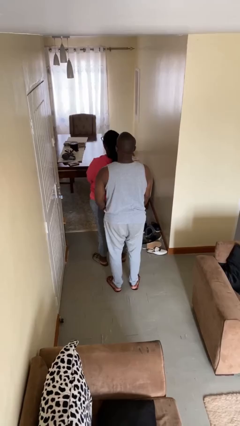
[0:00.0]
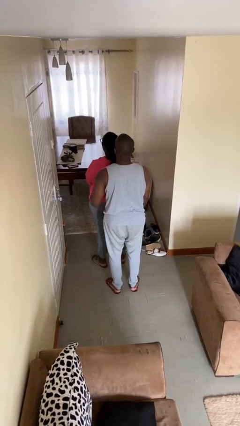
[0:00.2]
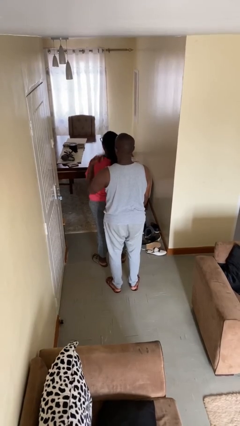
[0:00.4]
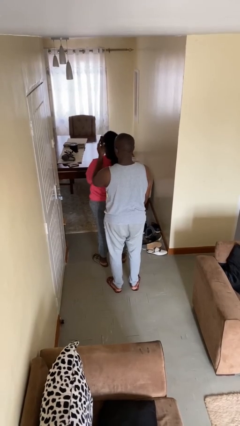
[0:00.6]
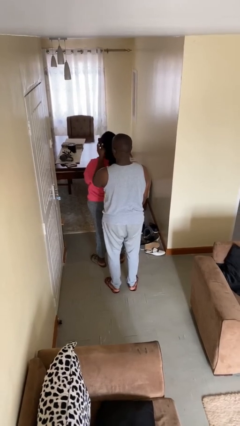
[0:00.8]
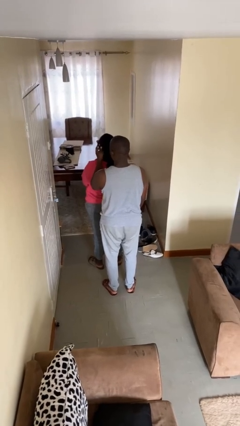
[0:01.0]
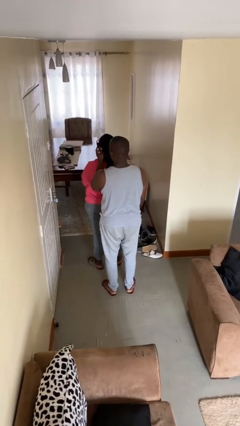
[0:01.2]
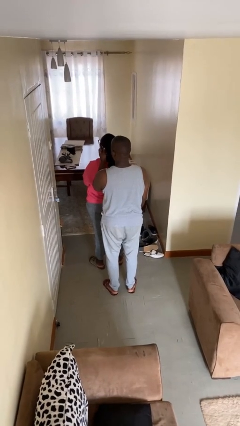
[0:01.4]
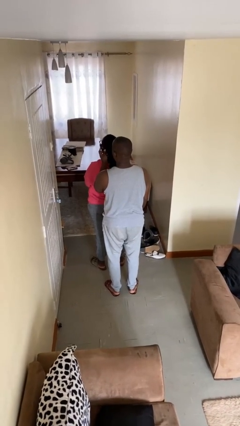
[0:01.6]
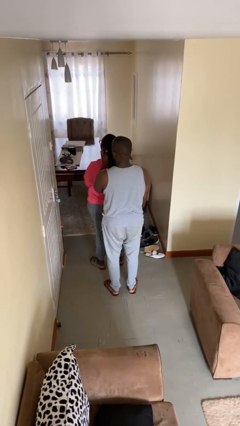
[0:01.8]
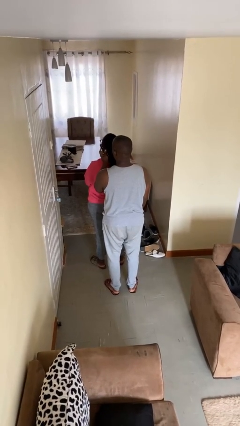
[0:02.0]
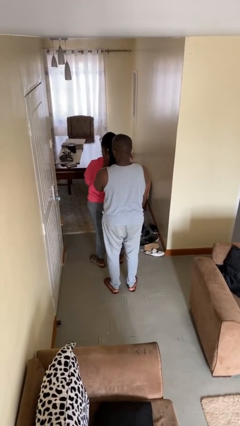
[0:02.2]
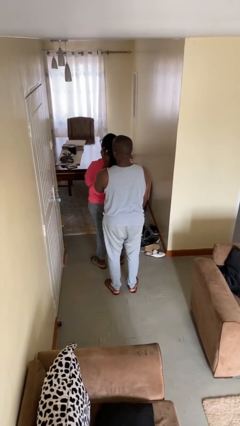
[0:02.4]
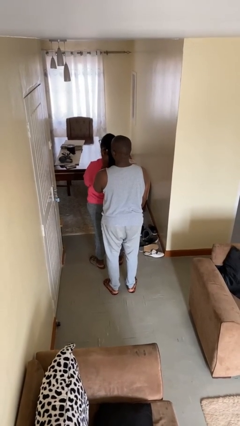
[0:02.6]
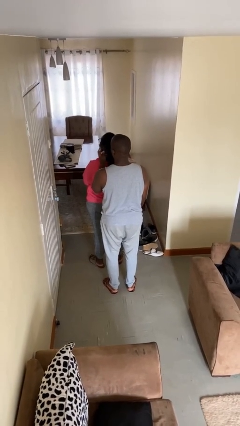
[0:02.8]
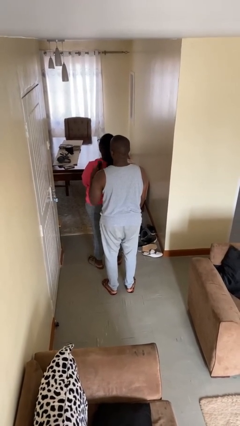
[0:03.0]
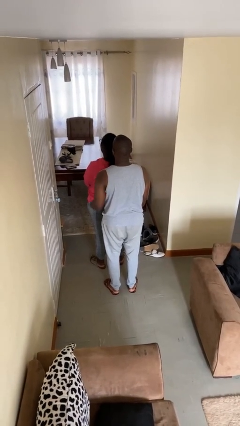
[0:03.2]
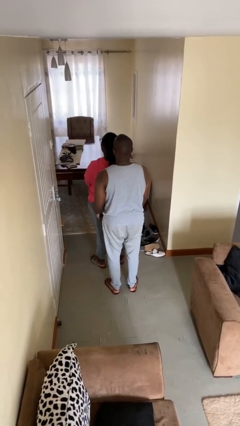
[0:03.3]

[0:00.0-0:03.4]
person brushes hair of person

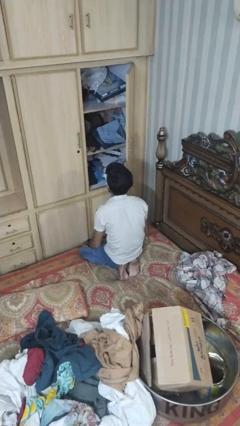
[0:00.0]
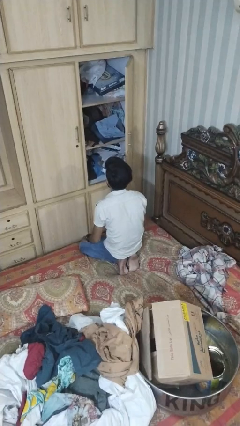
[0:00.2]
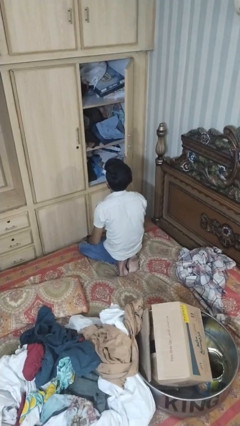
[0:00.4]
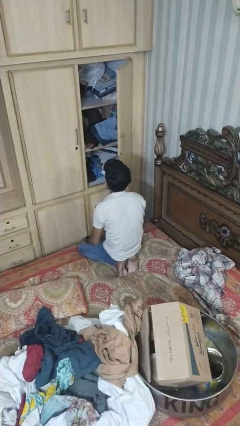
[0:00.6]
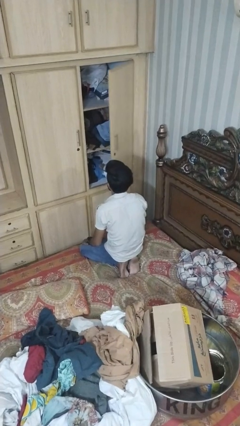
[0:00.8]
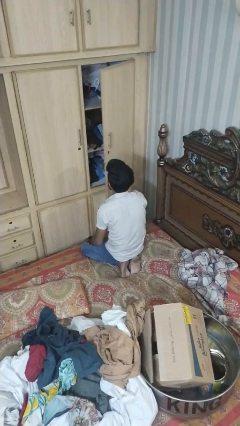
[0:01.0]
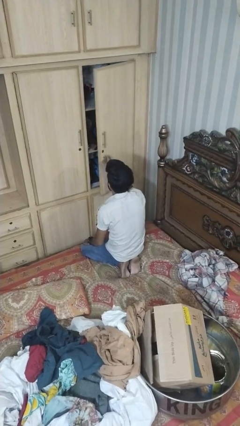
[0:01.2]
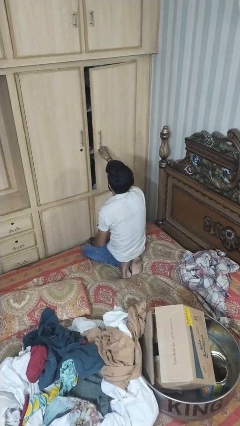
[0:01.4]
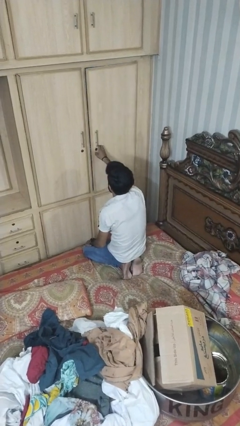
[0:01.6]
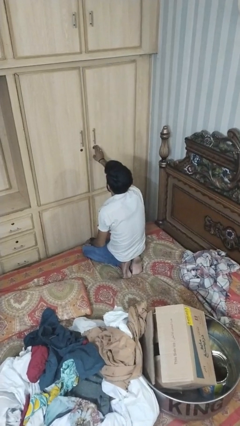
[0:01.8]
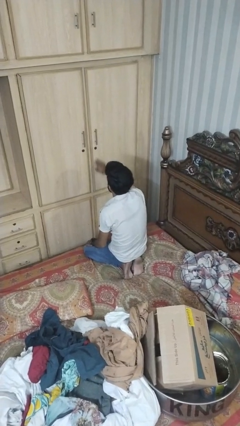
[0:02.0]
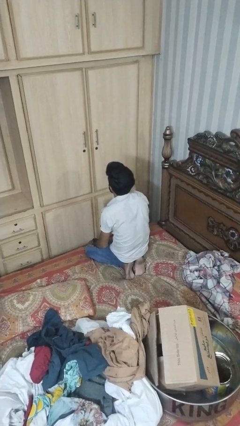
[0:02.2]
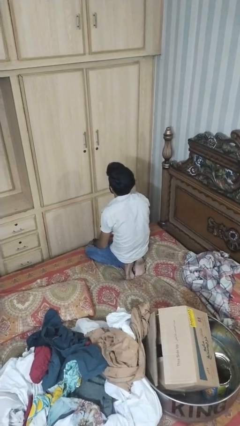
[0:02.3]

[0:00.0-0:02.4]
person closes dresser drawer

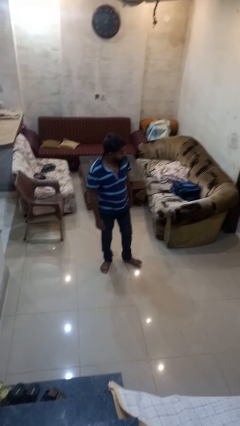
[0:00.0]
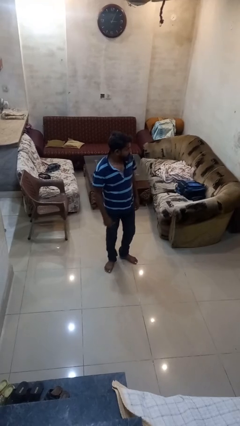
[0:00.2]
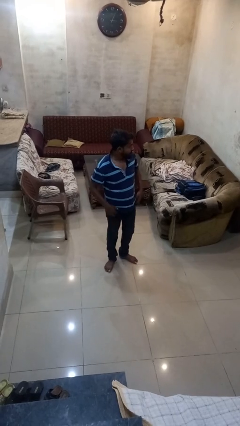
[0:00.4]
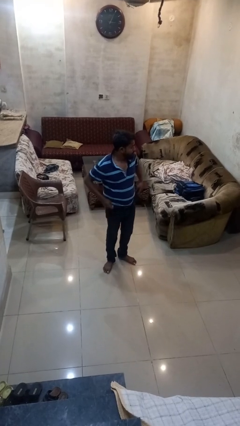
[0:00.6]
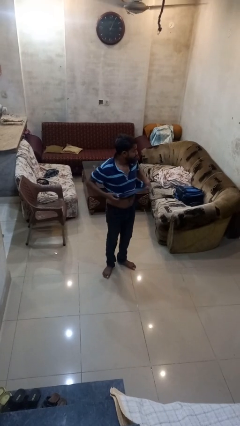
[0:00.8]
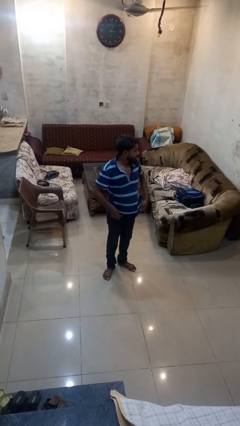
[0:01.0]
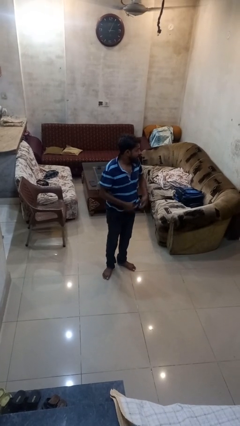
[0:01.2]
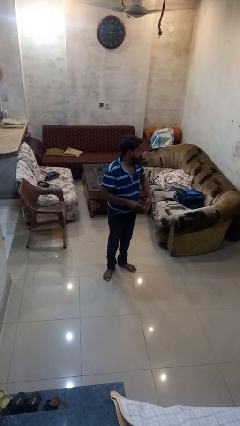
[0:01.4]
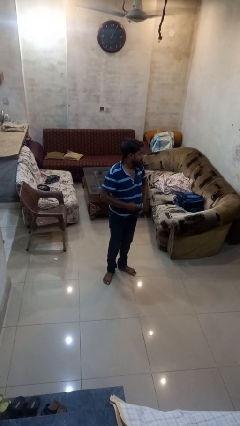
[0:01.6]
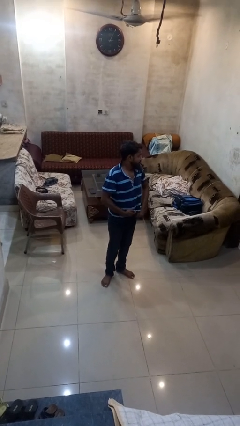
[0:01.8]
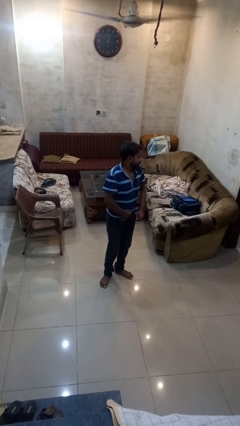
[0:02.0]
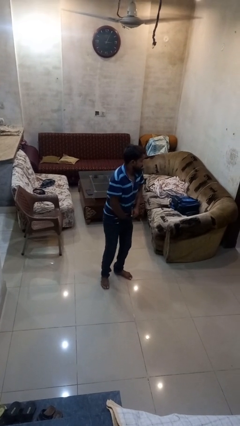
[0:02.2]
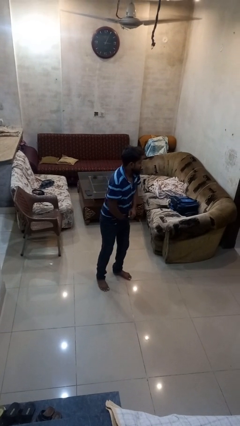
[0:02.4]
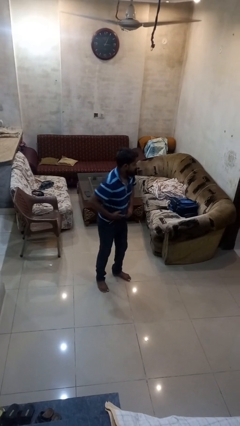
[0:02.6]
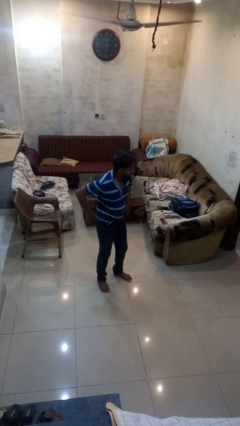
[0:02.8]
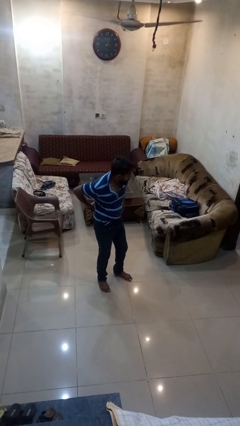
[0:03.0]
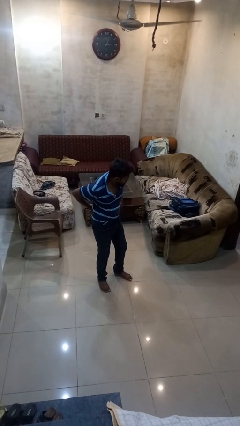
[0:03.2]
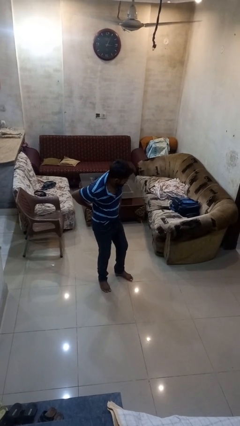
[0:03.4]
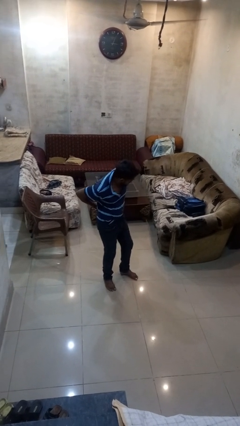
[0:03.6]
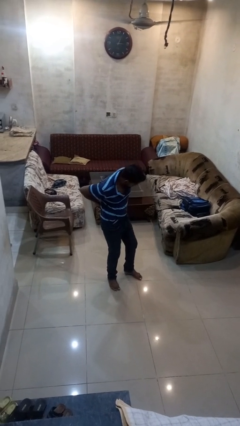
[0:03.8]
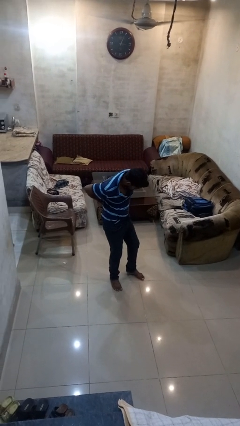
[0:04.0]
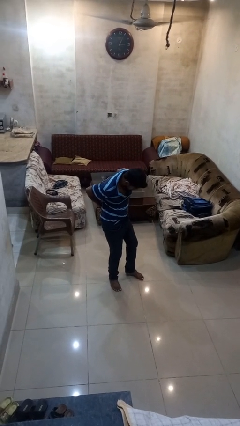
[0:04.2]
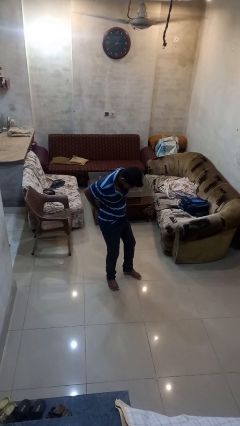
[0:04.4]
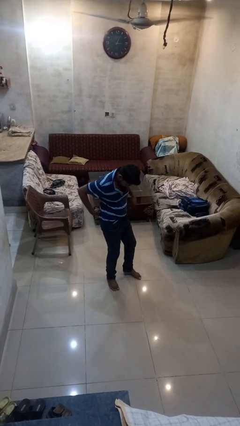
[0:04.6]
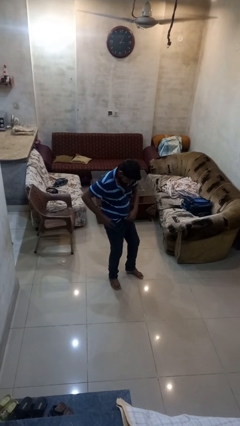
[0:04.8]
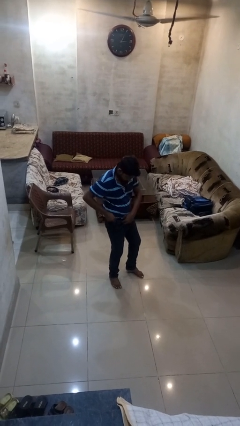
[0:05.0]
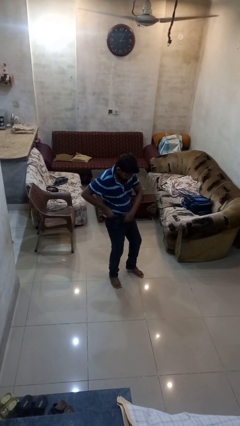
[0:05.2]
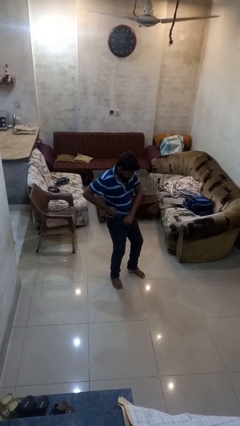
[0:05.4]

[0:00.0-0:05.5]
person tucks in shirt

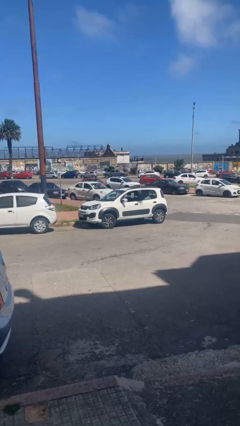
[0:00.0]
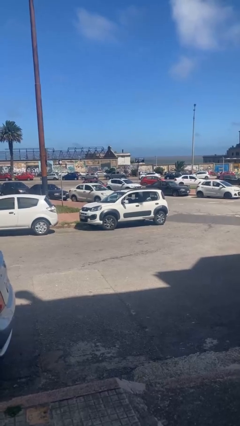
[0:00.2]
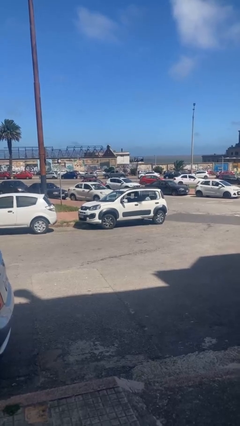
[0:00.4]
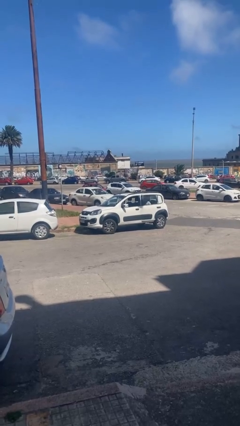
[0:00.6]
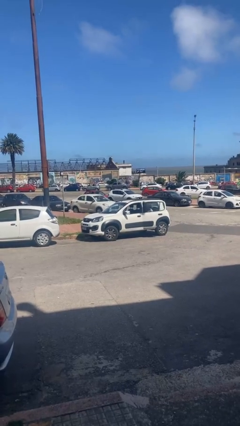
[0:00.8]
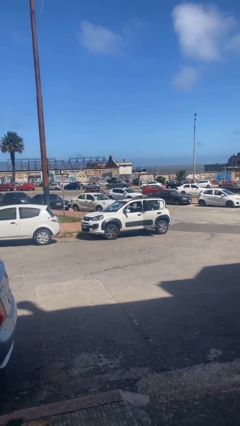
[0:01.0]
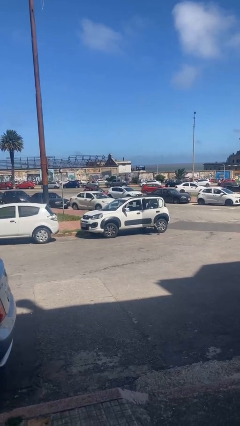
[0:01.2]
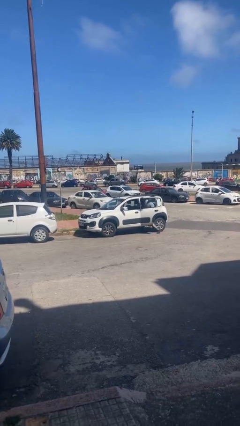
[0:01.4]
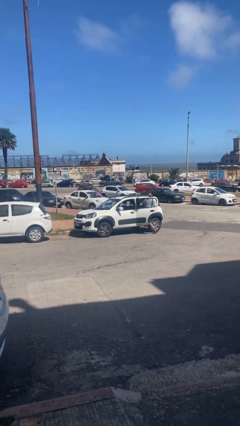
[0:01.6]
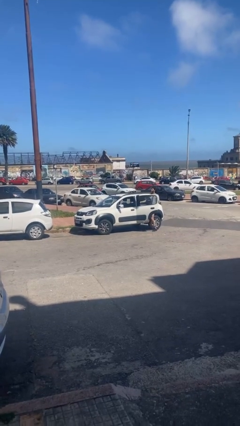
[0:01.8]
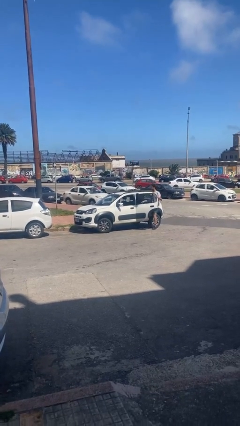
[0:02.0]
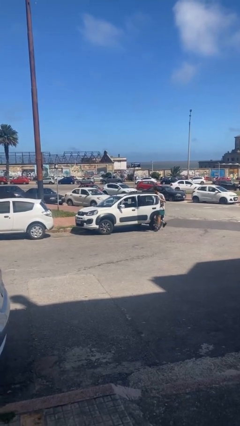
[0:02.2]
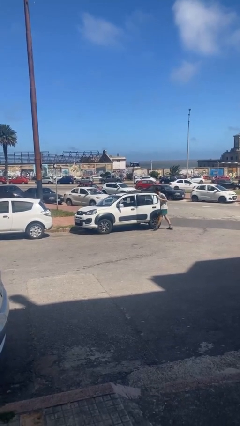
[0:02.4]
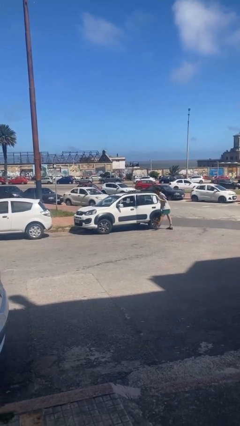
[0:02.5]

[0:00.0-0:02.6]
car drops off person

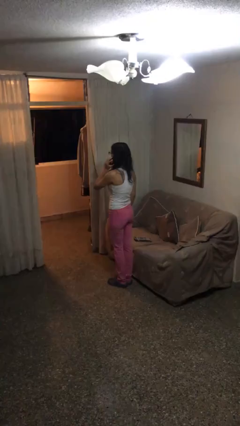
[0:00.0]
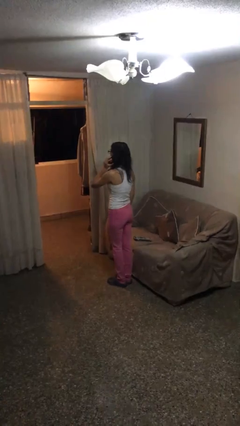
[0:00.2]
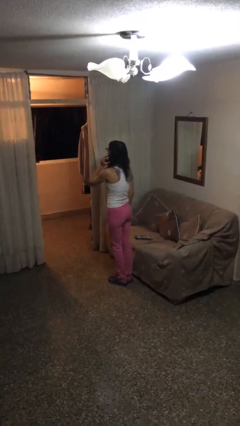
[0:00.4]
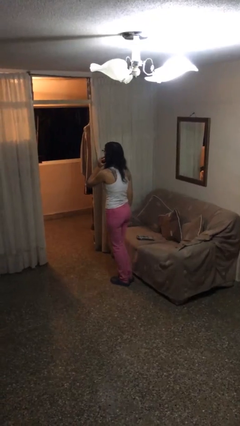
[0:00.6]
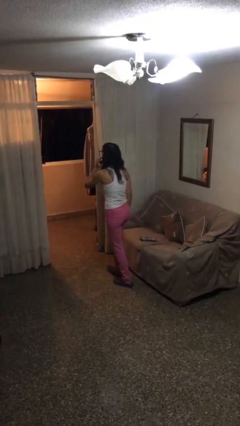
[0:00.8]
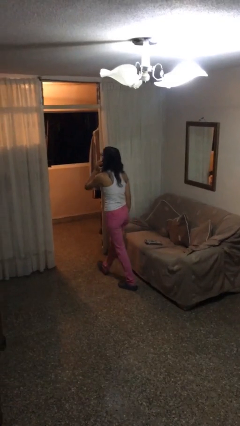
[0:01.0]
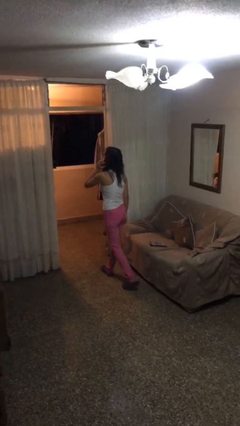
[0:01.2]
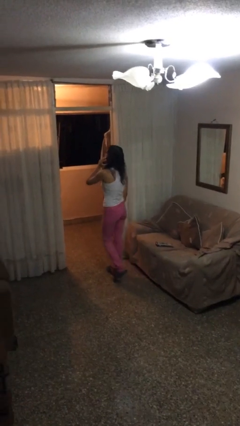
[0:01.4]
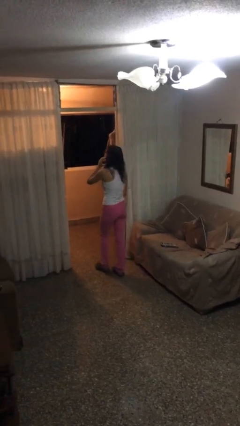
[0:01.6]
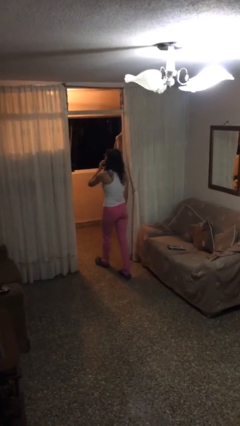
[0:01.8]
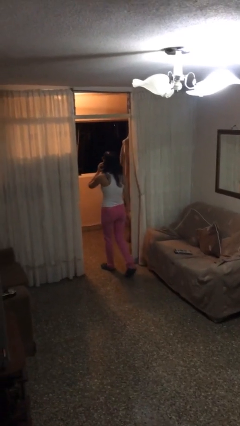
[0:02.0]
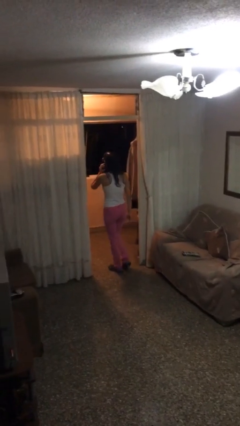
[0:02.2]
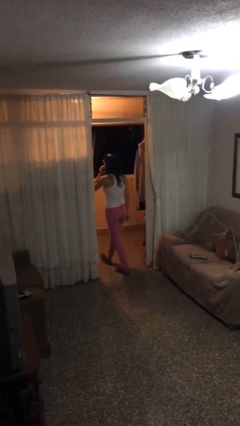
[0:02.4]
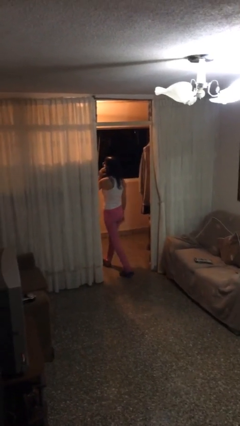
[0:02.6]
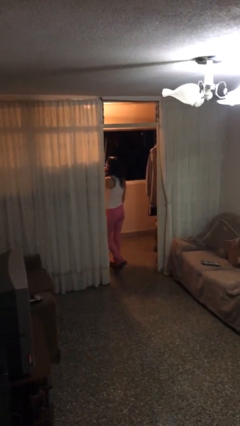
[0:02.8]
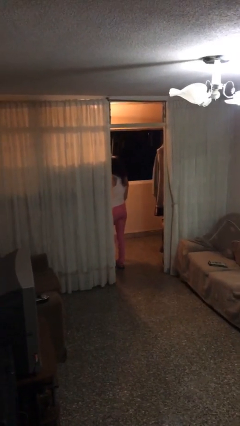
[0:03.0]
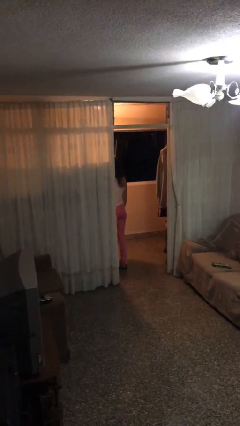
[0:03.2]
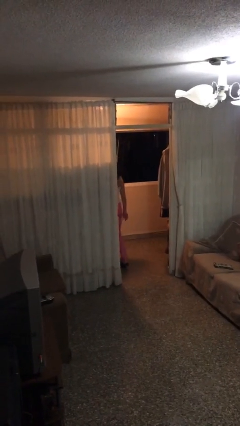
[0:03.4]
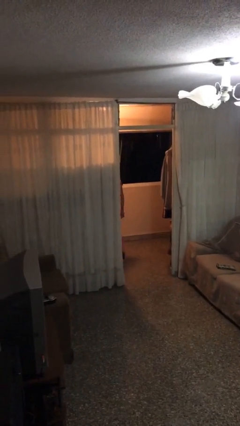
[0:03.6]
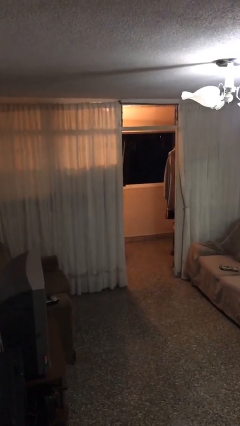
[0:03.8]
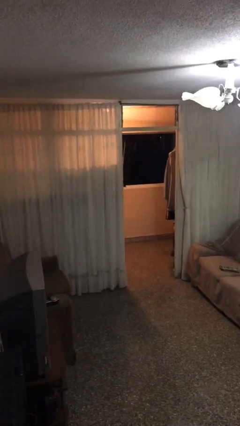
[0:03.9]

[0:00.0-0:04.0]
person exits scene through structure
